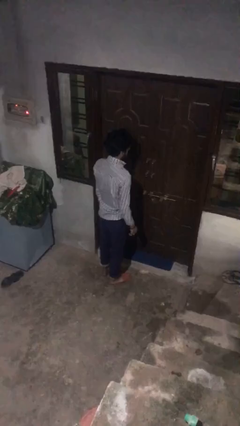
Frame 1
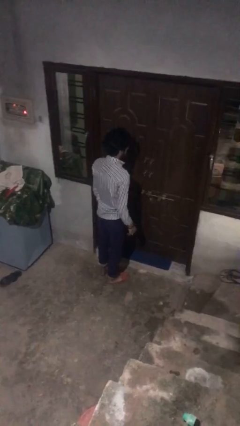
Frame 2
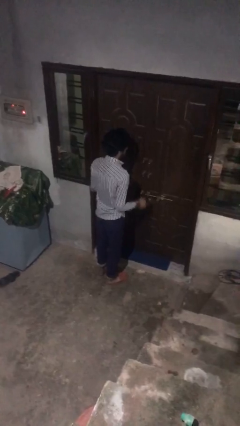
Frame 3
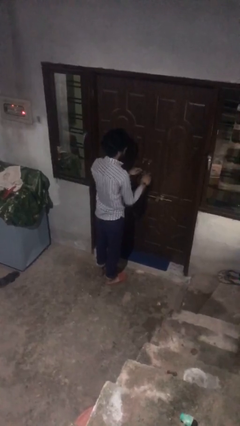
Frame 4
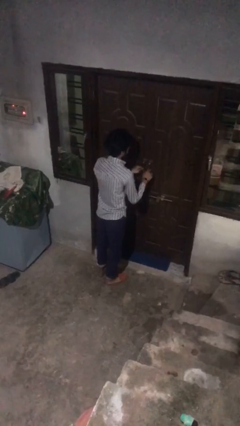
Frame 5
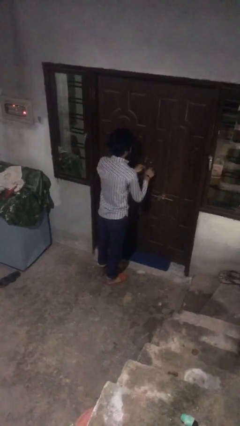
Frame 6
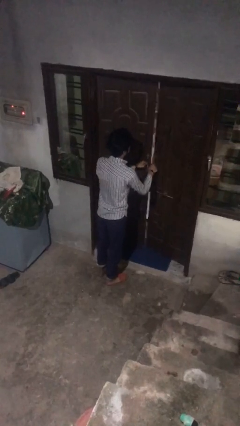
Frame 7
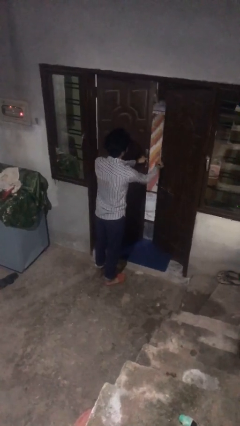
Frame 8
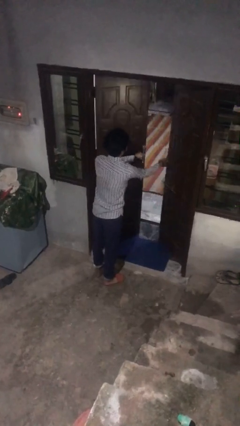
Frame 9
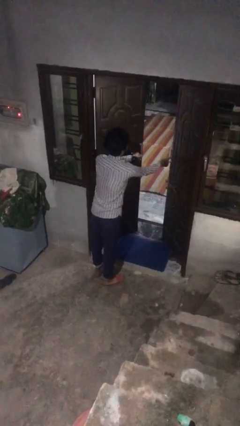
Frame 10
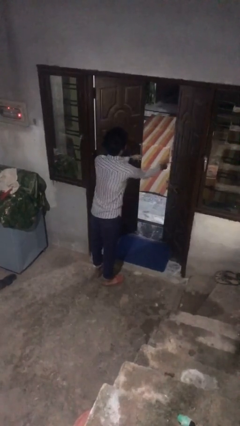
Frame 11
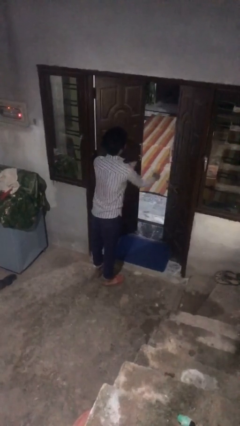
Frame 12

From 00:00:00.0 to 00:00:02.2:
person opens facility door

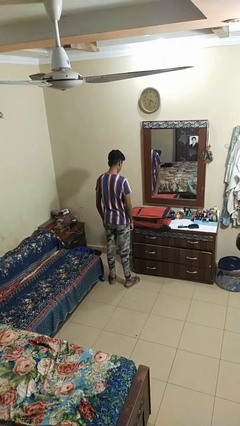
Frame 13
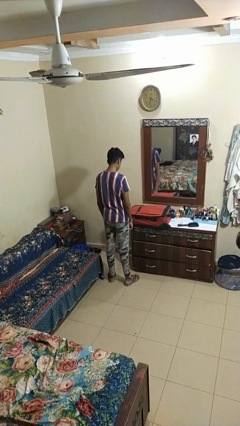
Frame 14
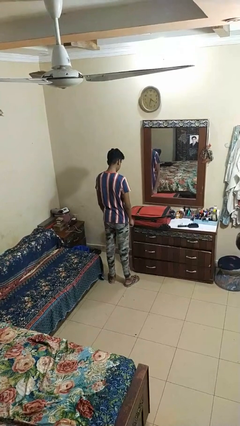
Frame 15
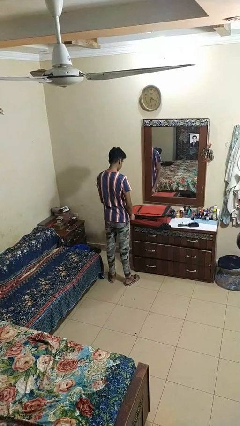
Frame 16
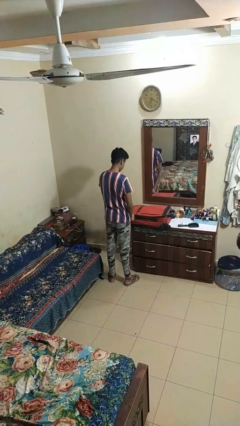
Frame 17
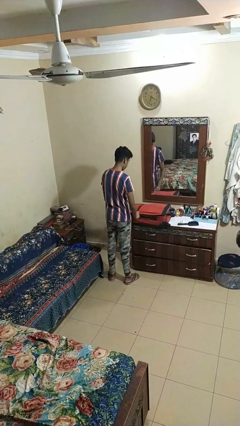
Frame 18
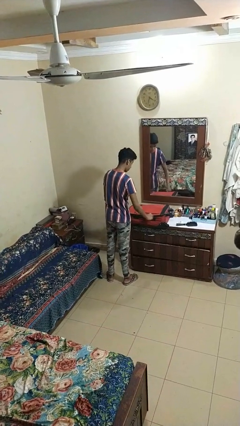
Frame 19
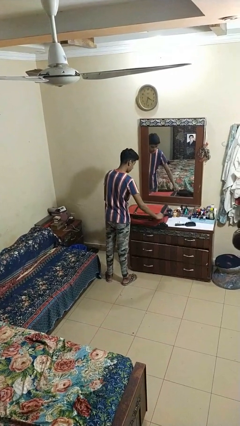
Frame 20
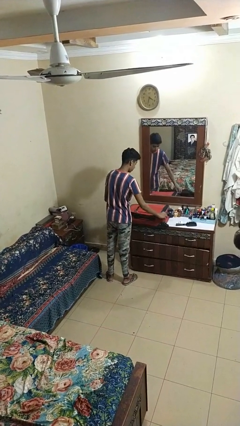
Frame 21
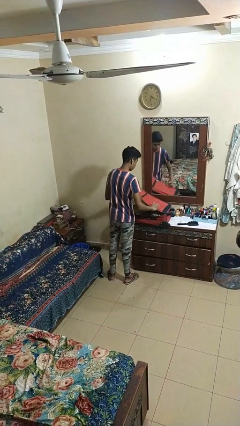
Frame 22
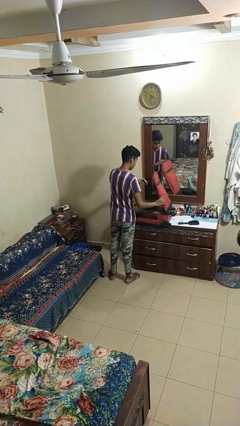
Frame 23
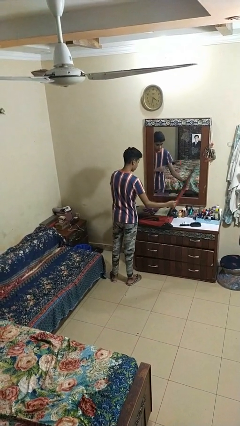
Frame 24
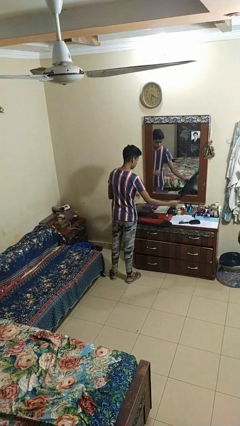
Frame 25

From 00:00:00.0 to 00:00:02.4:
person opens suitcase

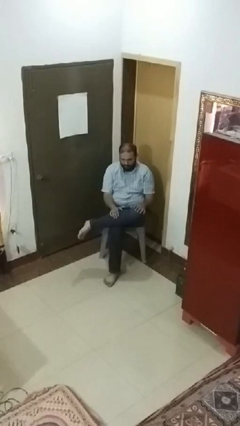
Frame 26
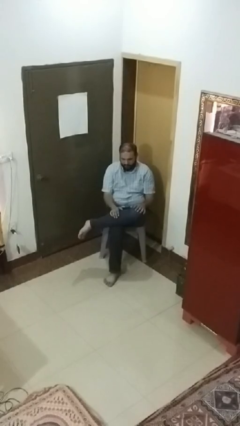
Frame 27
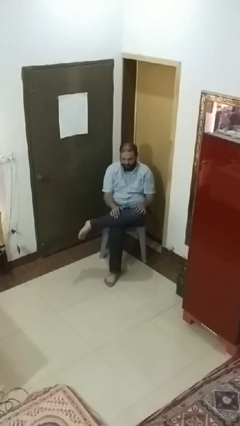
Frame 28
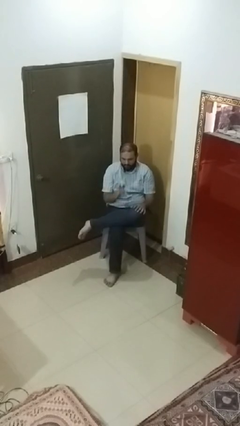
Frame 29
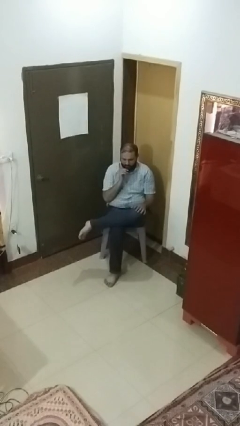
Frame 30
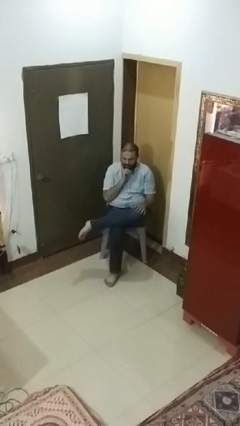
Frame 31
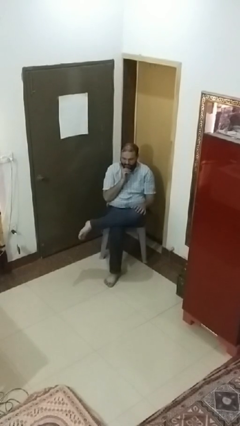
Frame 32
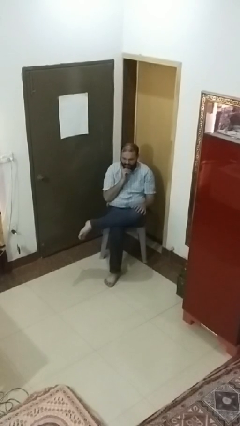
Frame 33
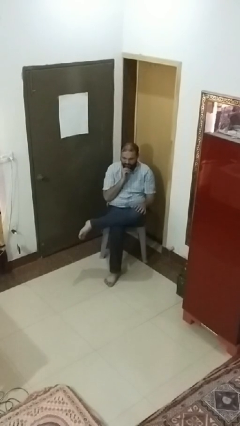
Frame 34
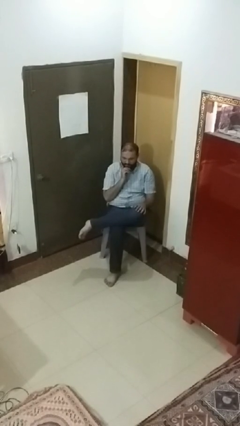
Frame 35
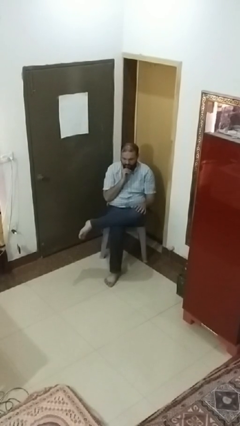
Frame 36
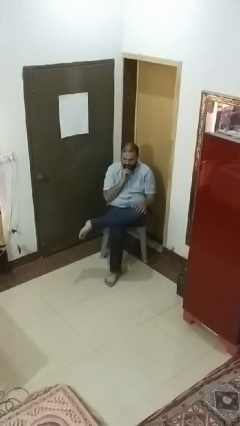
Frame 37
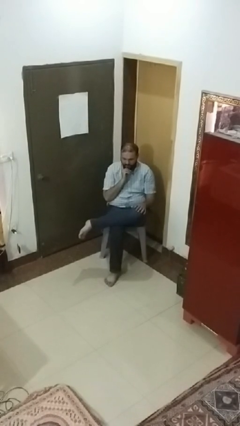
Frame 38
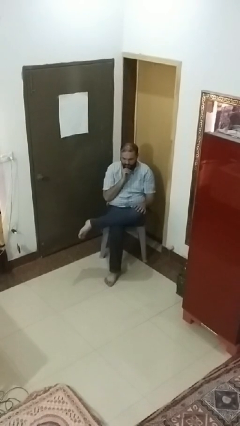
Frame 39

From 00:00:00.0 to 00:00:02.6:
person strokes chin

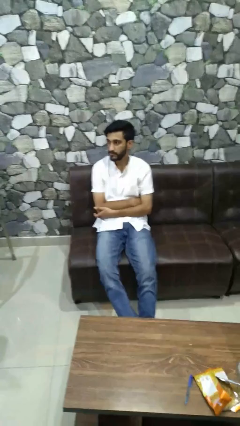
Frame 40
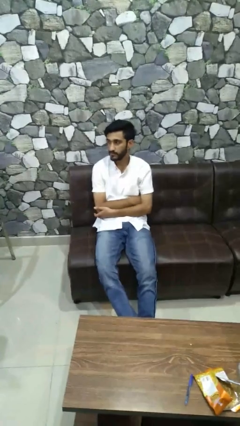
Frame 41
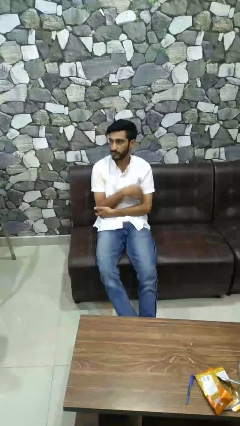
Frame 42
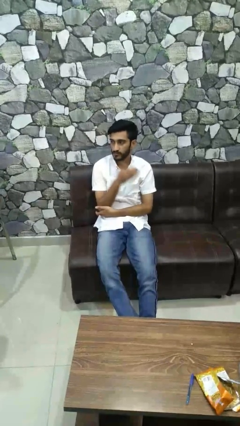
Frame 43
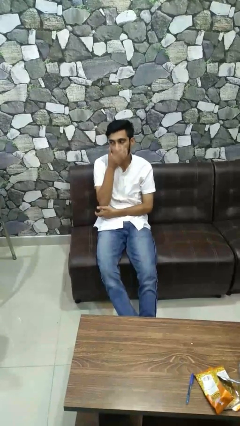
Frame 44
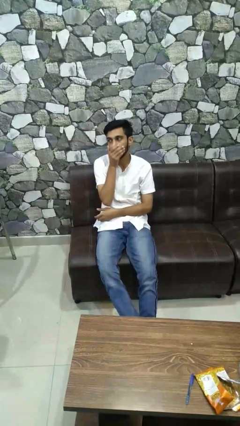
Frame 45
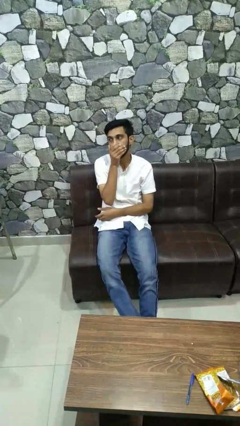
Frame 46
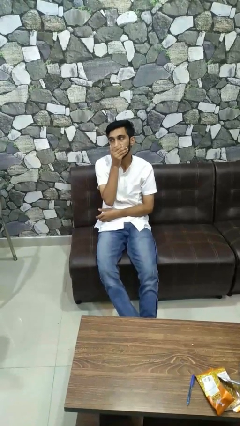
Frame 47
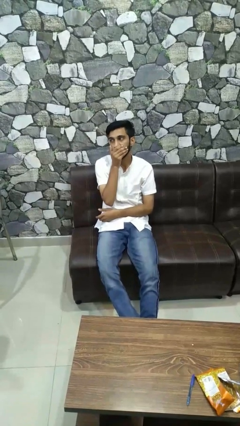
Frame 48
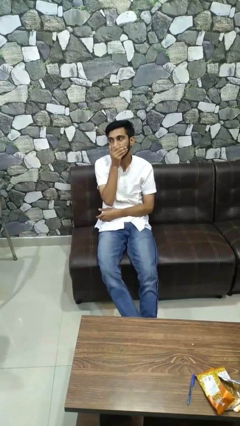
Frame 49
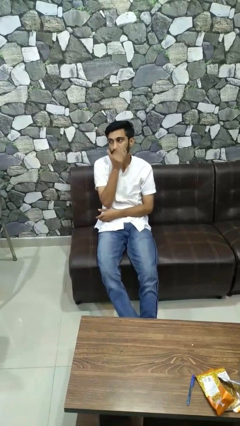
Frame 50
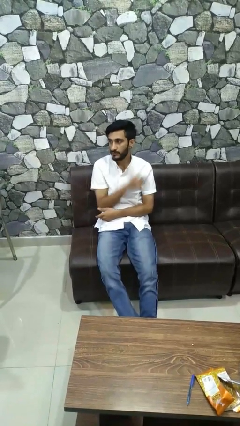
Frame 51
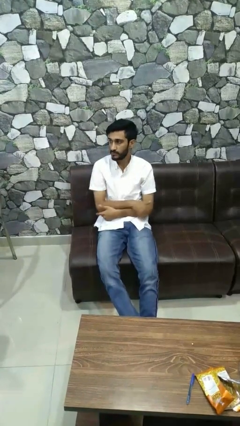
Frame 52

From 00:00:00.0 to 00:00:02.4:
person covers face with hands

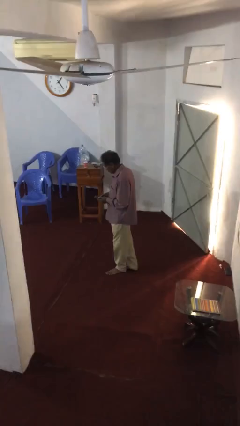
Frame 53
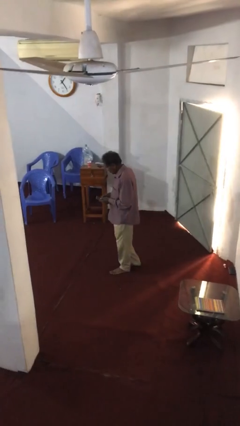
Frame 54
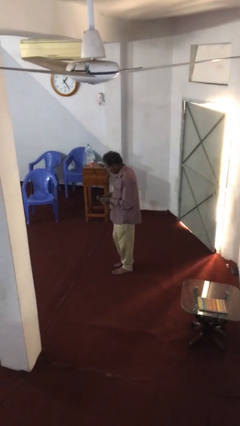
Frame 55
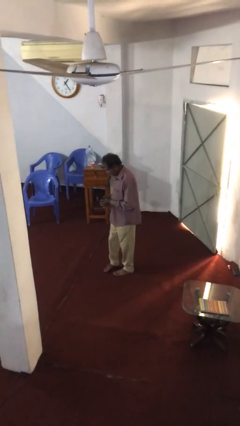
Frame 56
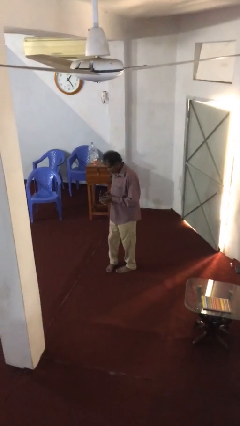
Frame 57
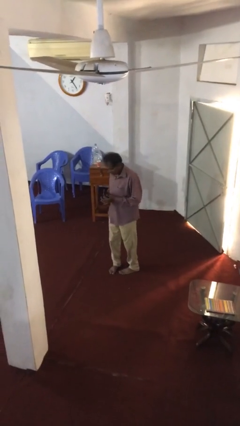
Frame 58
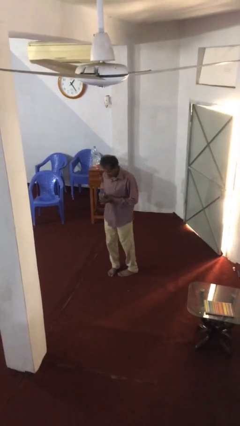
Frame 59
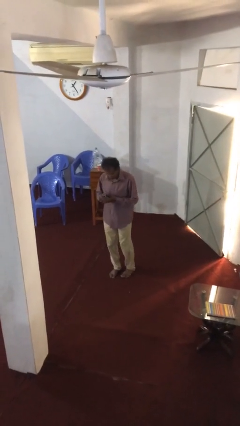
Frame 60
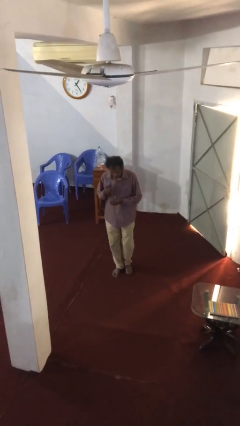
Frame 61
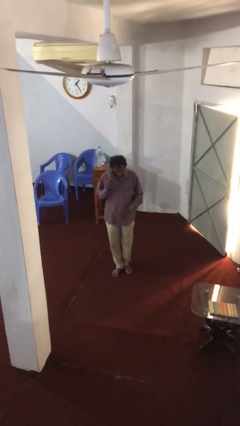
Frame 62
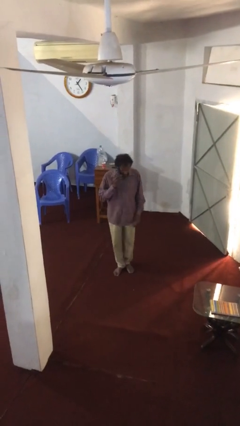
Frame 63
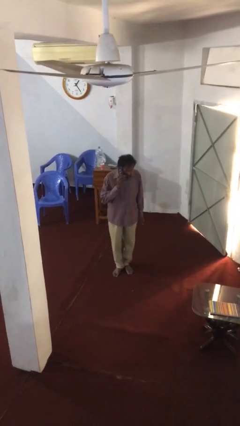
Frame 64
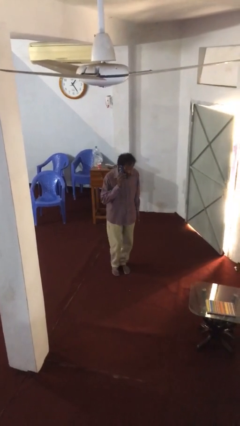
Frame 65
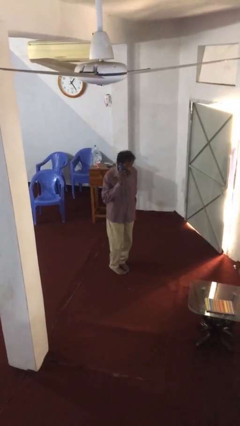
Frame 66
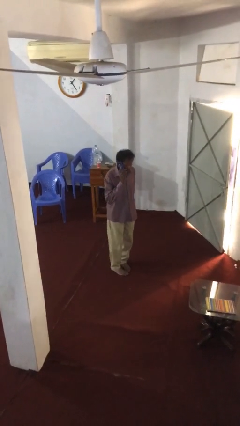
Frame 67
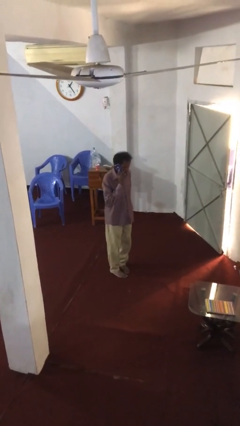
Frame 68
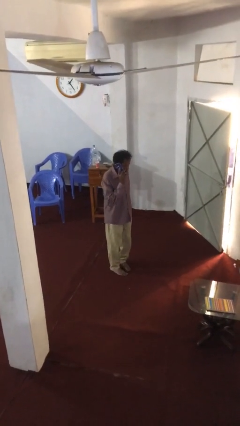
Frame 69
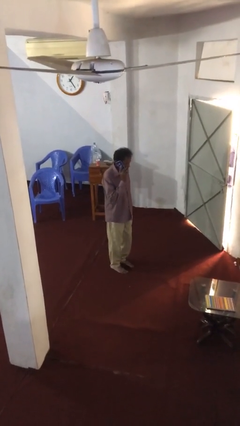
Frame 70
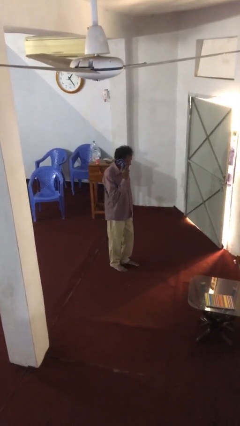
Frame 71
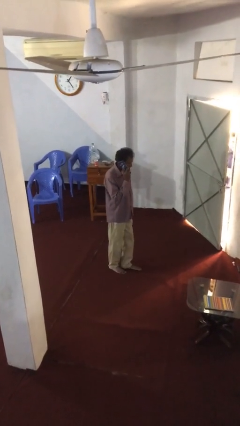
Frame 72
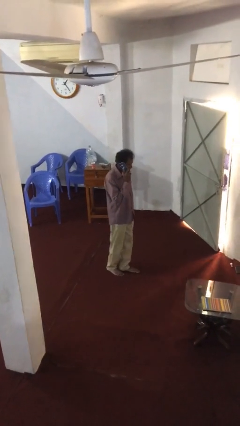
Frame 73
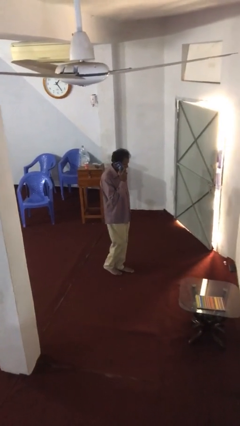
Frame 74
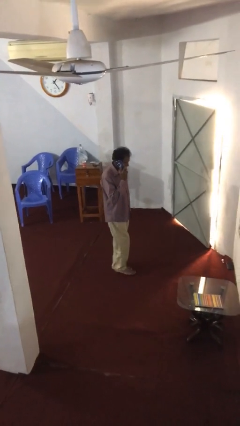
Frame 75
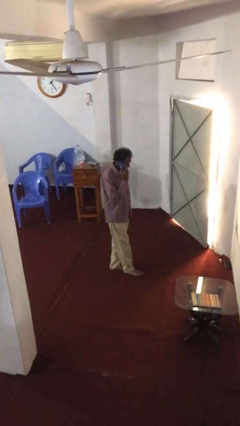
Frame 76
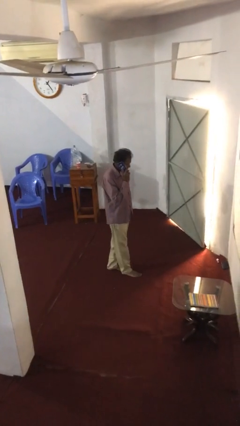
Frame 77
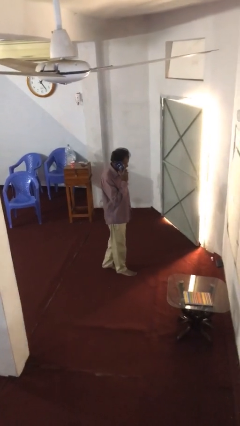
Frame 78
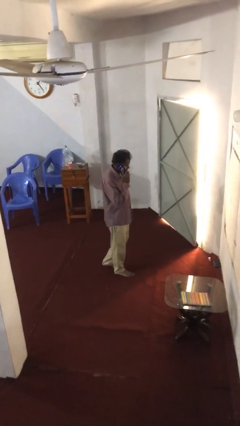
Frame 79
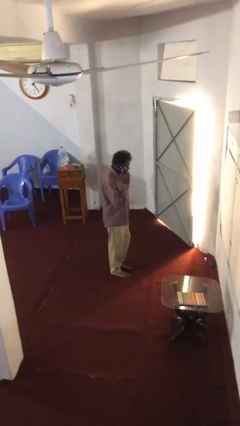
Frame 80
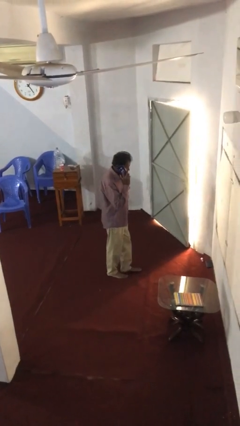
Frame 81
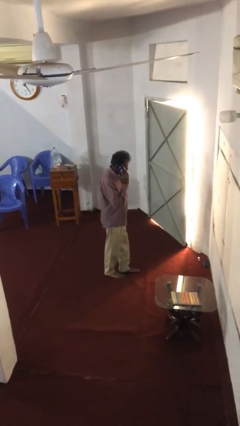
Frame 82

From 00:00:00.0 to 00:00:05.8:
person talks on phone

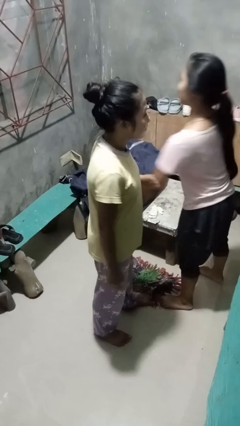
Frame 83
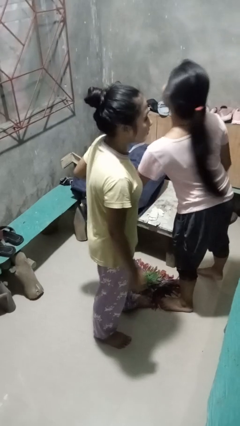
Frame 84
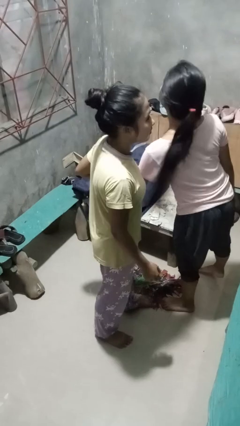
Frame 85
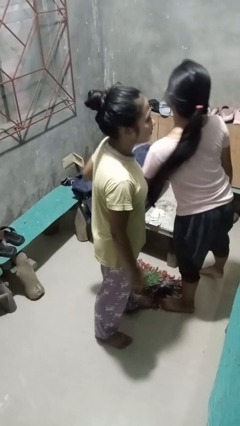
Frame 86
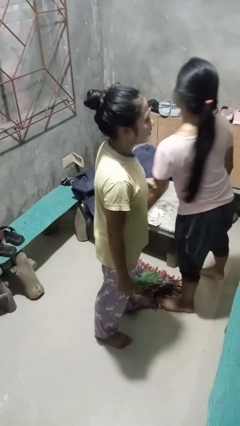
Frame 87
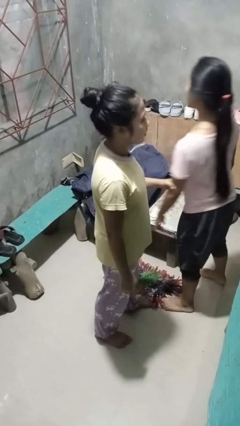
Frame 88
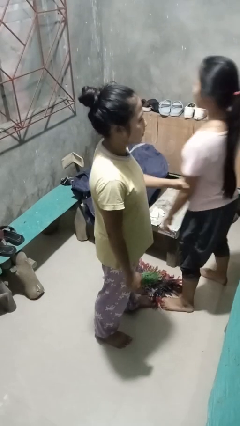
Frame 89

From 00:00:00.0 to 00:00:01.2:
person grabs person by forearm

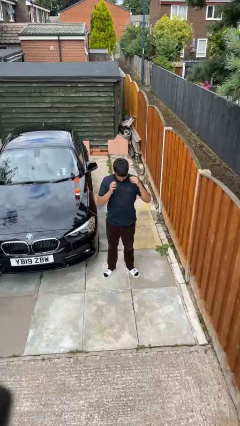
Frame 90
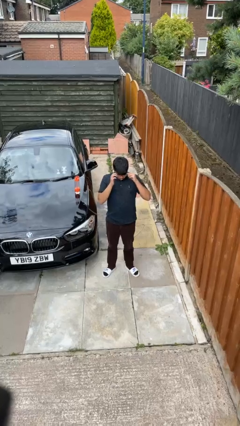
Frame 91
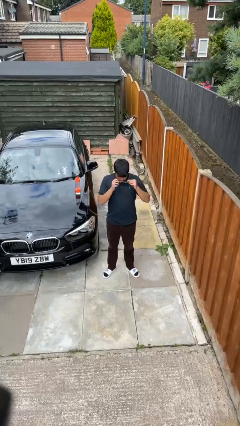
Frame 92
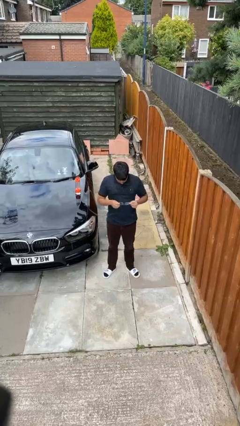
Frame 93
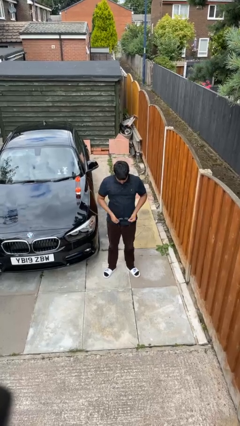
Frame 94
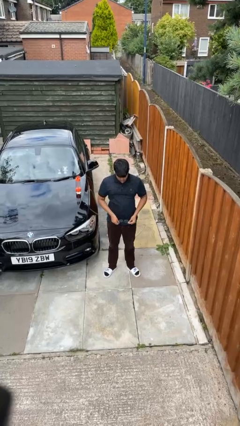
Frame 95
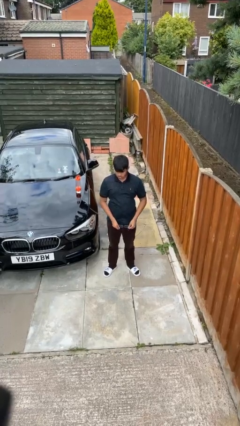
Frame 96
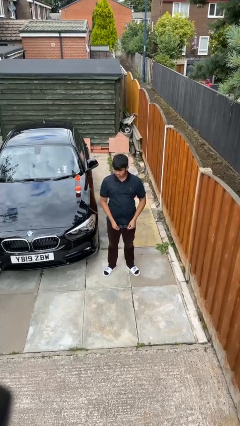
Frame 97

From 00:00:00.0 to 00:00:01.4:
person takes off glasses
